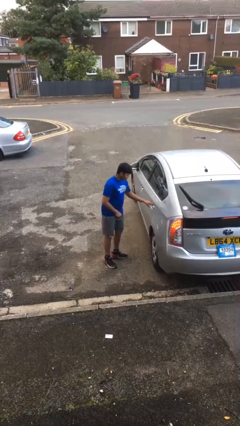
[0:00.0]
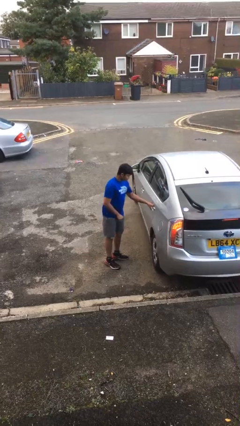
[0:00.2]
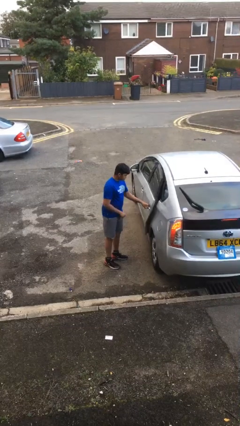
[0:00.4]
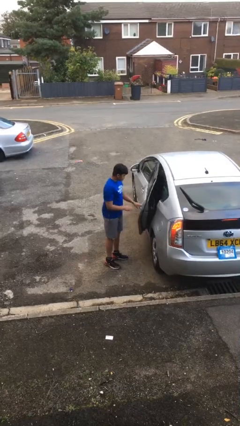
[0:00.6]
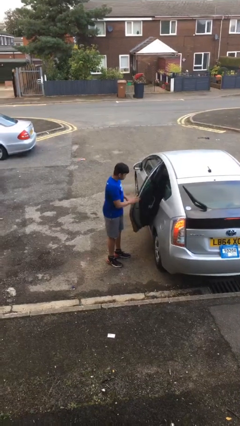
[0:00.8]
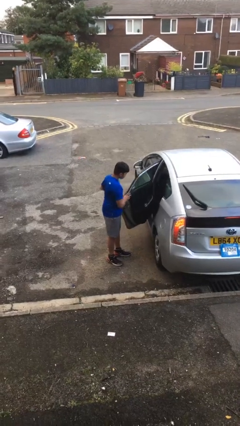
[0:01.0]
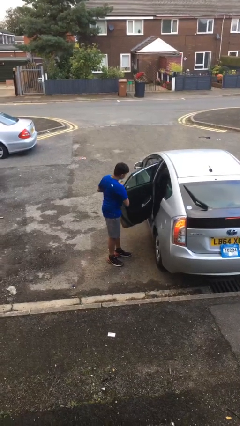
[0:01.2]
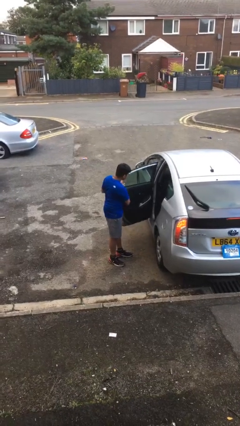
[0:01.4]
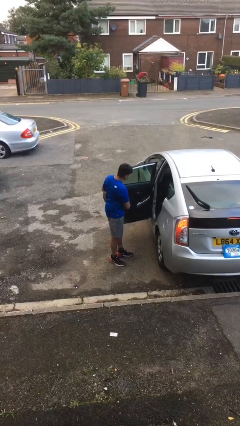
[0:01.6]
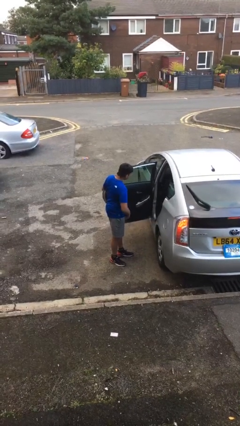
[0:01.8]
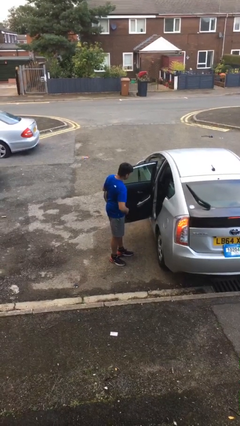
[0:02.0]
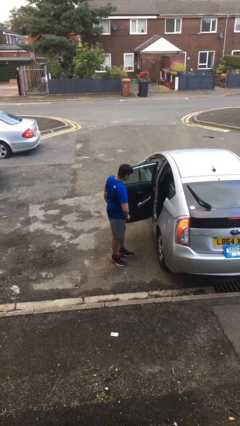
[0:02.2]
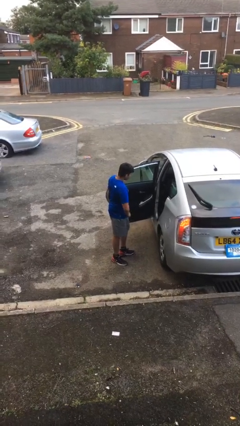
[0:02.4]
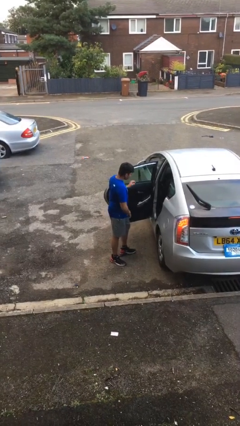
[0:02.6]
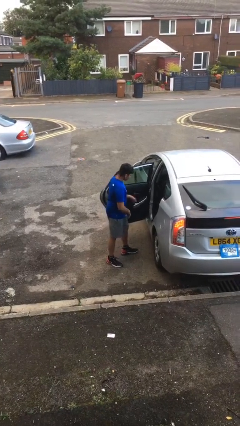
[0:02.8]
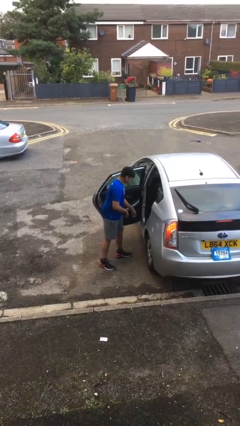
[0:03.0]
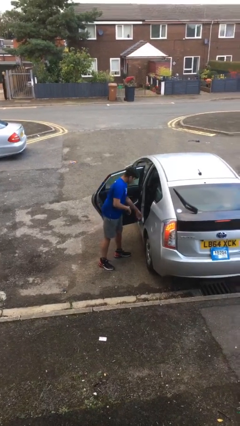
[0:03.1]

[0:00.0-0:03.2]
person opens car door

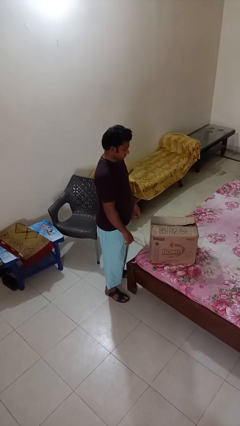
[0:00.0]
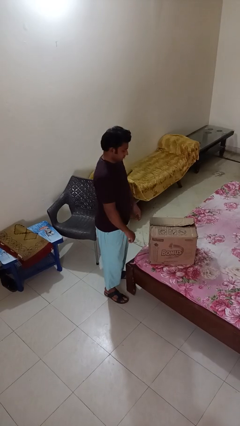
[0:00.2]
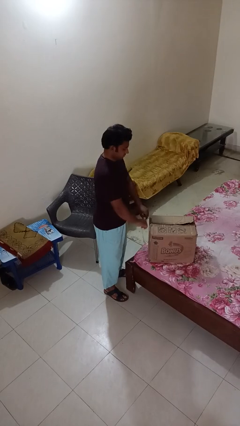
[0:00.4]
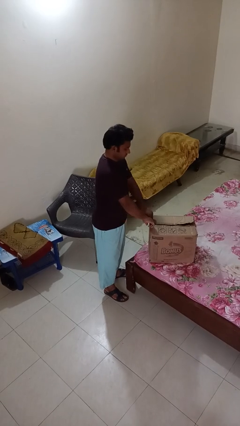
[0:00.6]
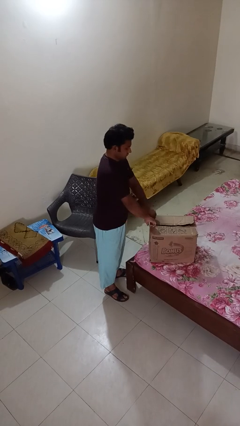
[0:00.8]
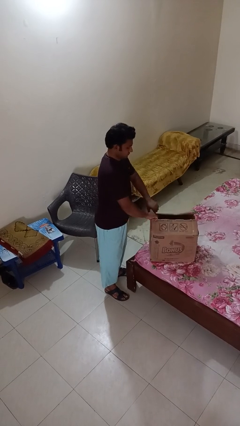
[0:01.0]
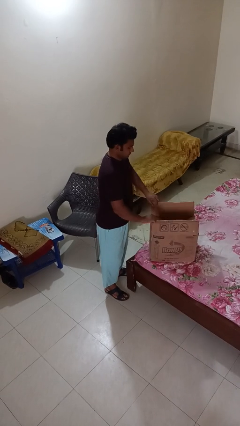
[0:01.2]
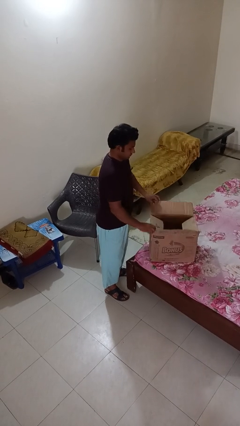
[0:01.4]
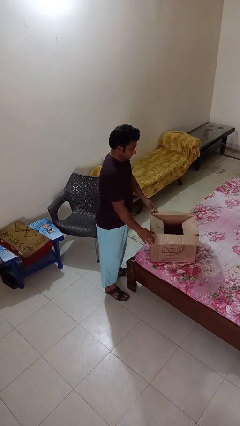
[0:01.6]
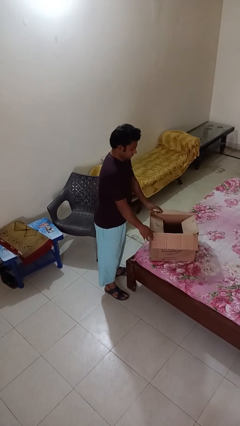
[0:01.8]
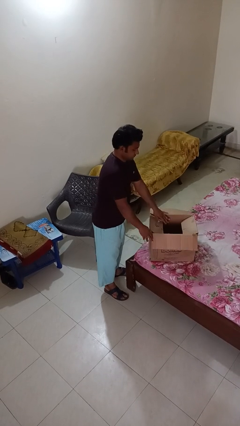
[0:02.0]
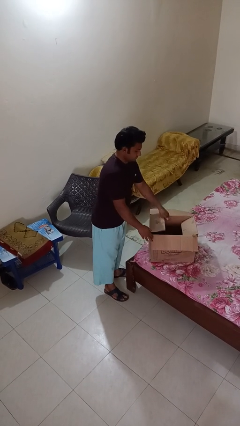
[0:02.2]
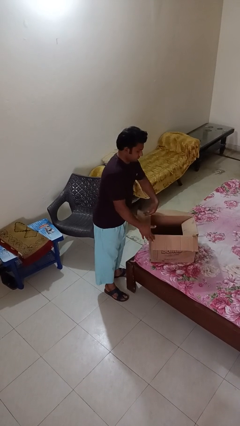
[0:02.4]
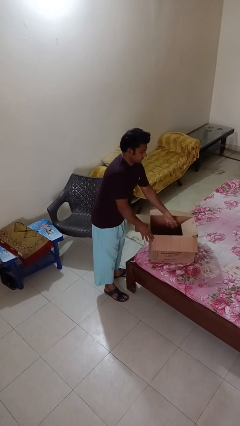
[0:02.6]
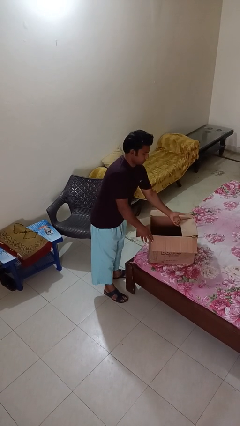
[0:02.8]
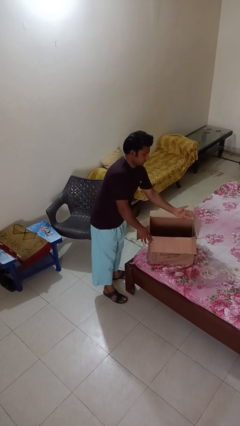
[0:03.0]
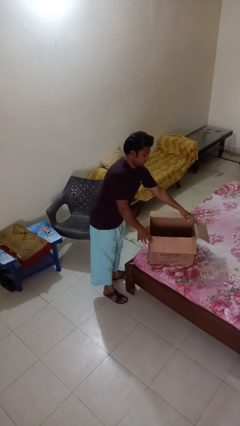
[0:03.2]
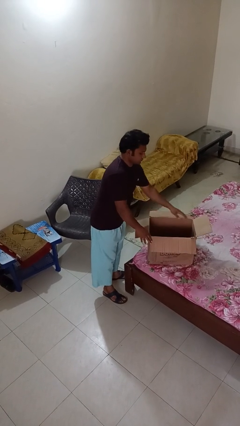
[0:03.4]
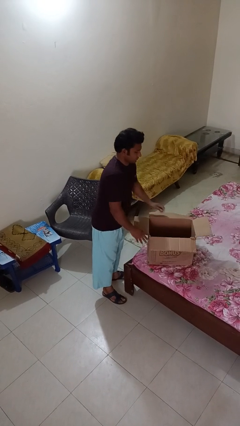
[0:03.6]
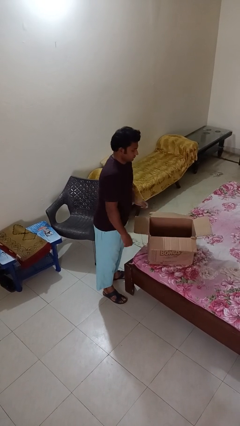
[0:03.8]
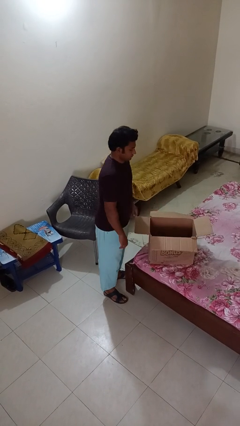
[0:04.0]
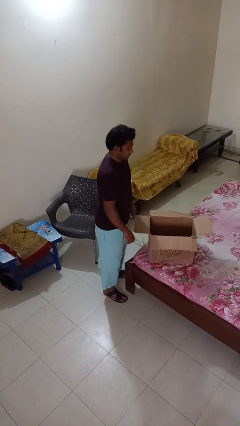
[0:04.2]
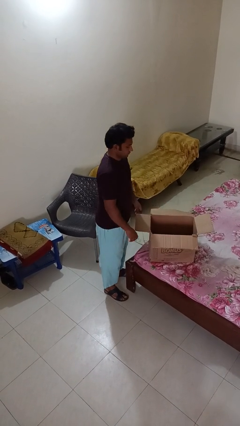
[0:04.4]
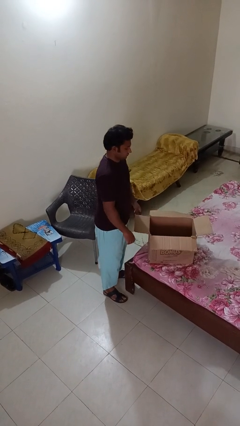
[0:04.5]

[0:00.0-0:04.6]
person opens box

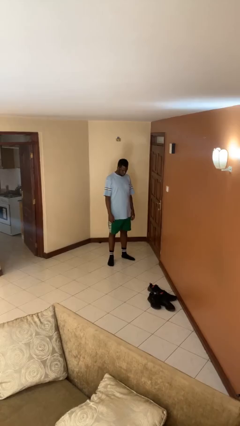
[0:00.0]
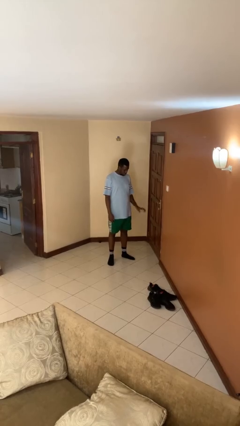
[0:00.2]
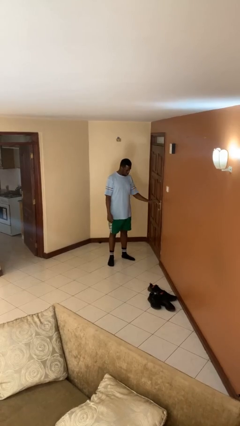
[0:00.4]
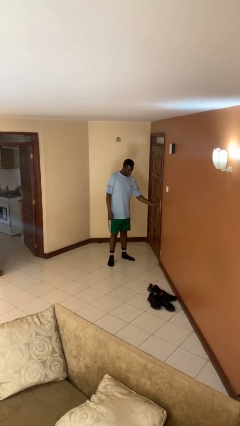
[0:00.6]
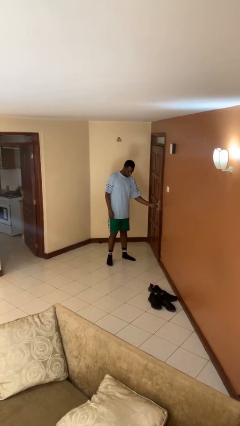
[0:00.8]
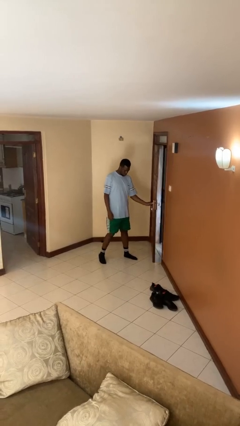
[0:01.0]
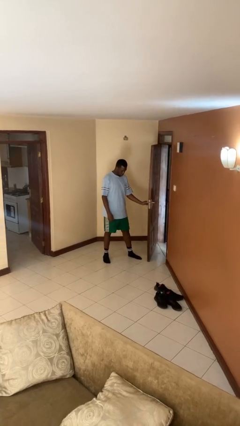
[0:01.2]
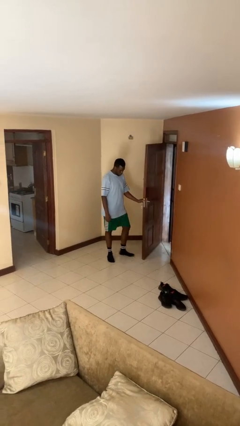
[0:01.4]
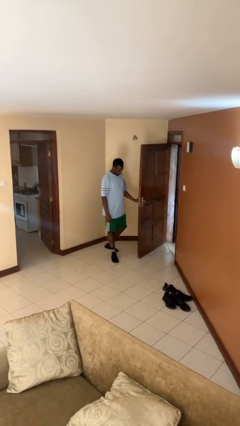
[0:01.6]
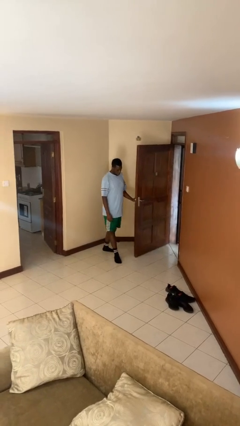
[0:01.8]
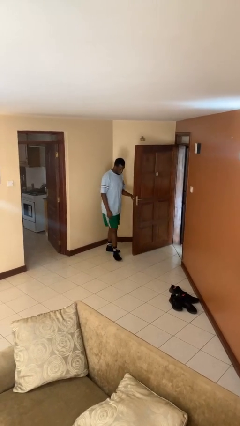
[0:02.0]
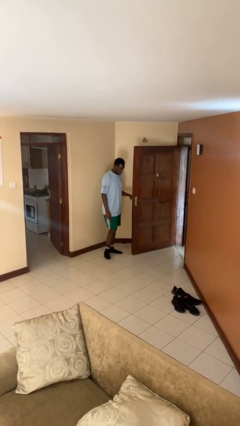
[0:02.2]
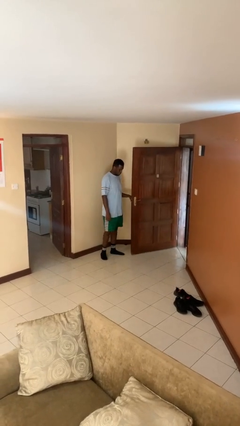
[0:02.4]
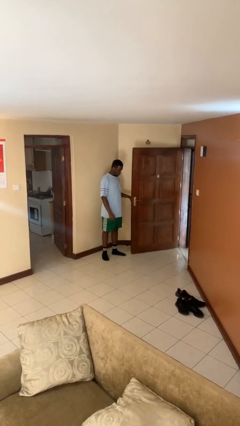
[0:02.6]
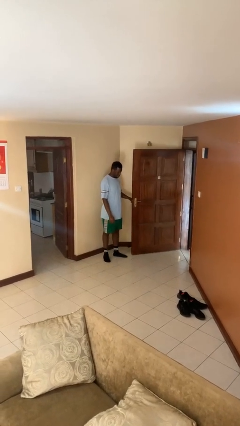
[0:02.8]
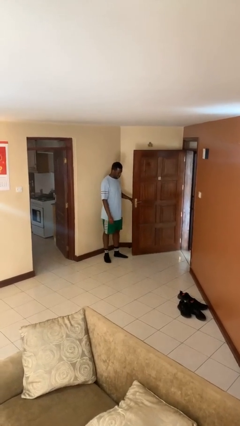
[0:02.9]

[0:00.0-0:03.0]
person opens facility door

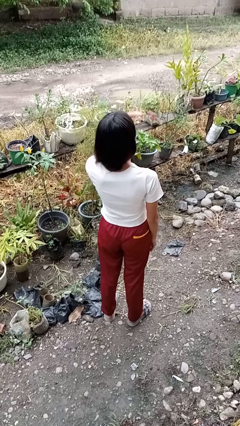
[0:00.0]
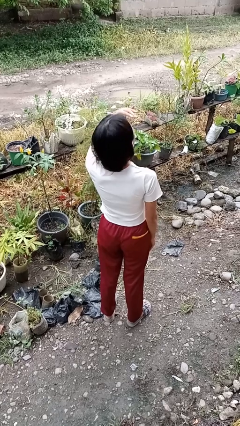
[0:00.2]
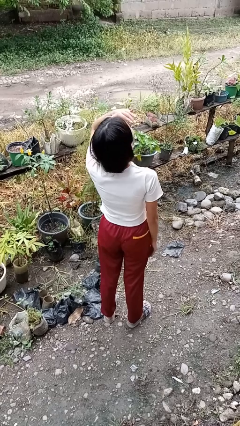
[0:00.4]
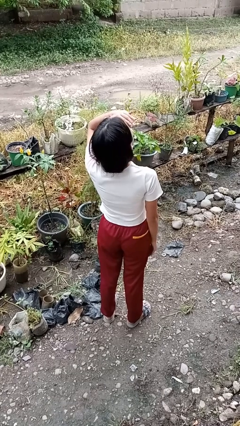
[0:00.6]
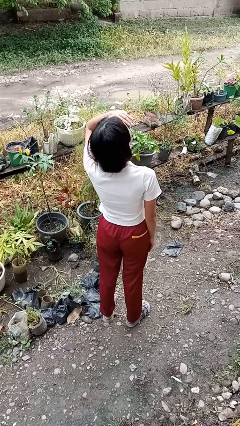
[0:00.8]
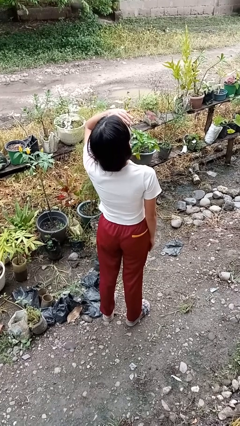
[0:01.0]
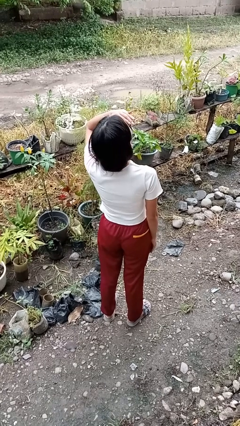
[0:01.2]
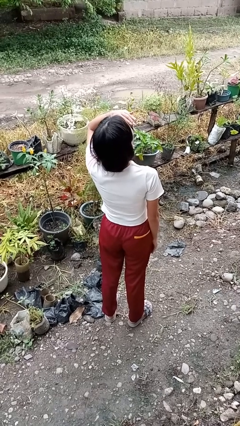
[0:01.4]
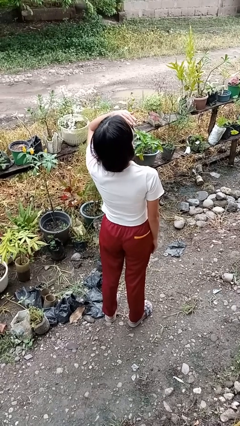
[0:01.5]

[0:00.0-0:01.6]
person shades eyes

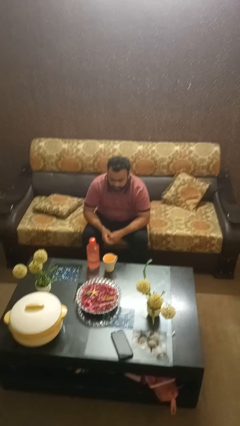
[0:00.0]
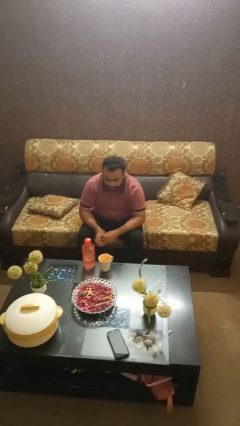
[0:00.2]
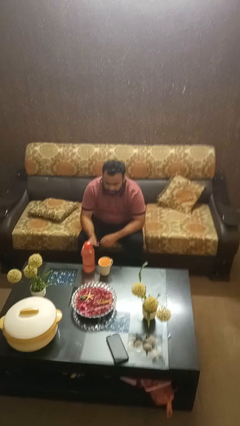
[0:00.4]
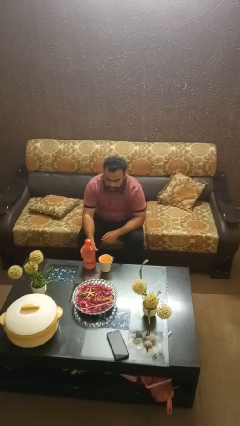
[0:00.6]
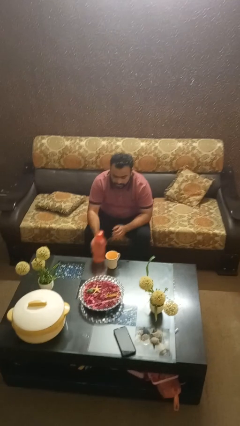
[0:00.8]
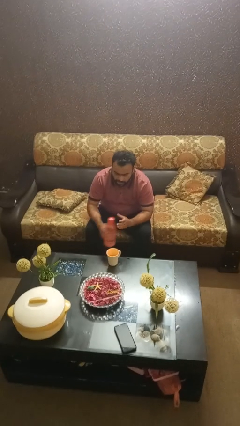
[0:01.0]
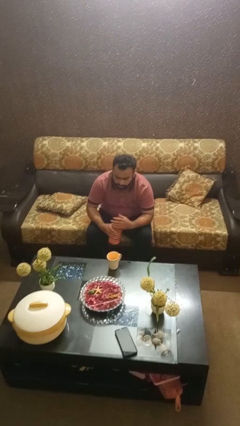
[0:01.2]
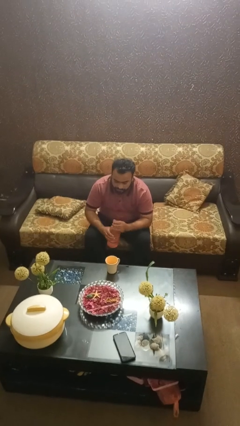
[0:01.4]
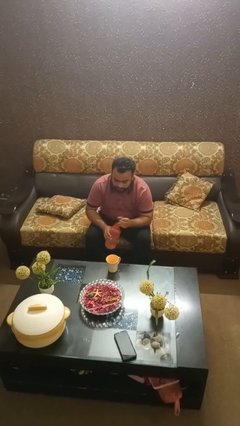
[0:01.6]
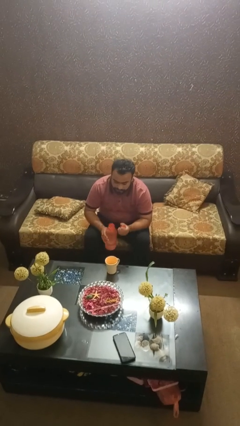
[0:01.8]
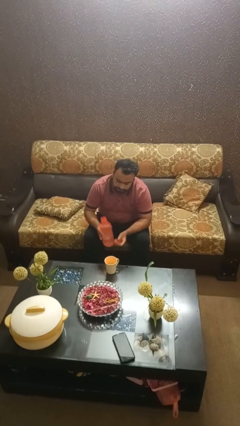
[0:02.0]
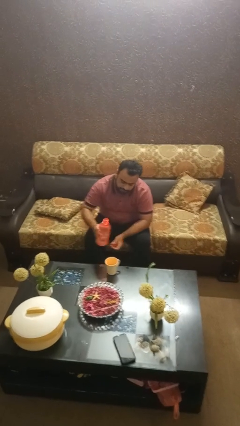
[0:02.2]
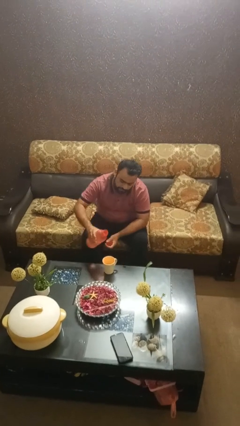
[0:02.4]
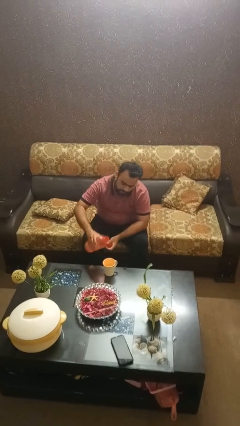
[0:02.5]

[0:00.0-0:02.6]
person unscrews lid from bottle

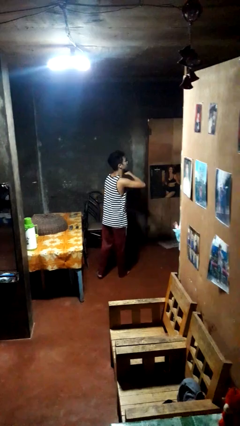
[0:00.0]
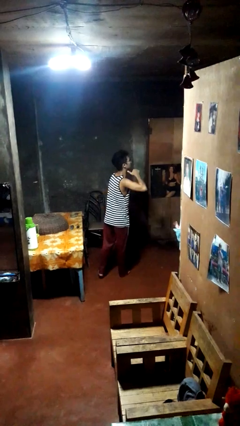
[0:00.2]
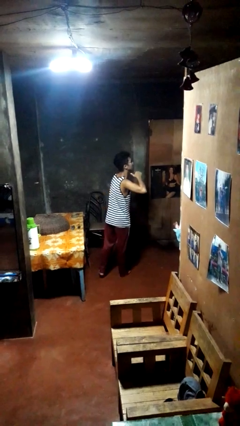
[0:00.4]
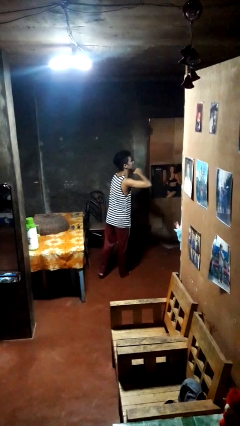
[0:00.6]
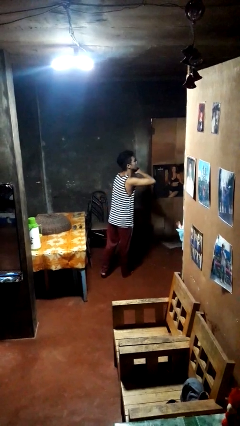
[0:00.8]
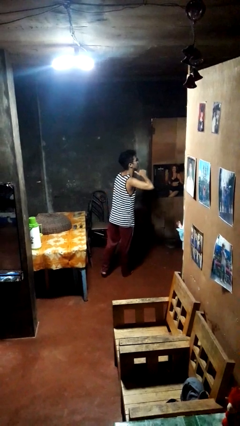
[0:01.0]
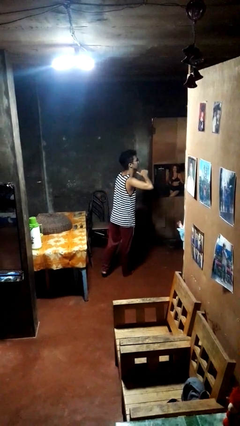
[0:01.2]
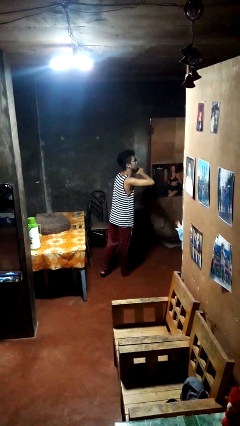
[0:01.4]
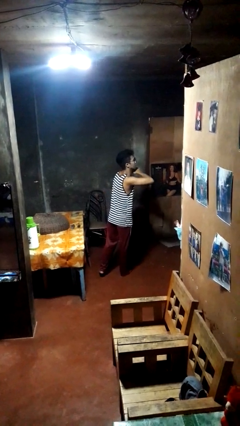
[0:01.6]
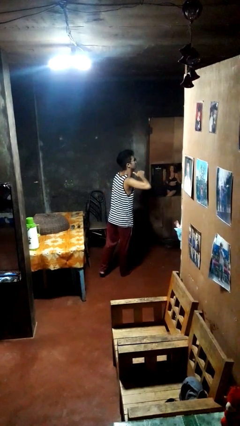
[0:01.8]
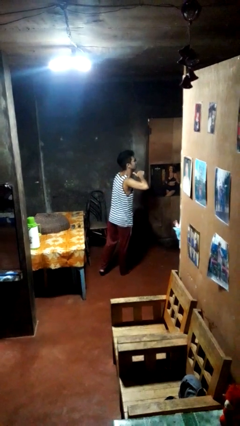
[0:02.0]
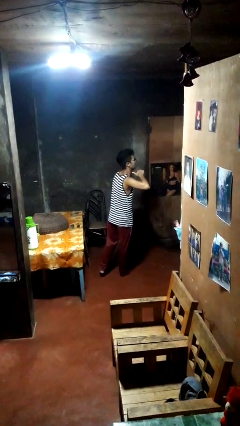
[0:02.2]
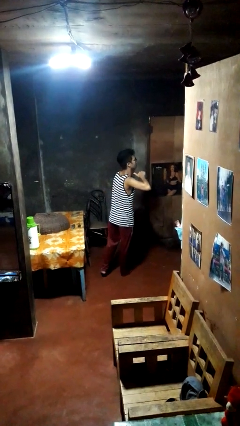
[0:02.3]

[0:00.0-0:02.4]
person gestures cut
